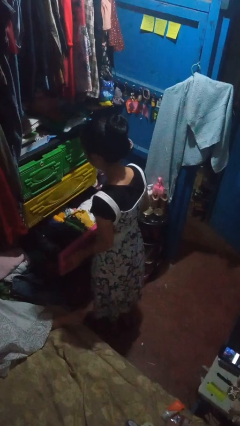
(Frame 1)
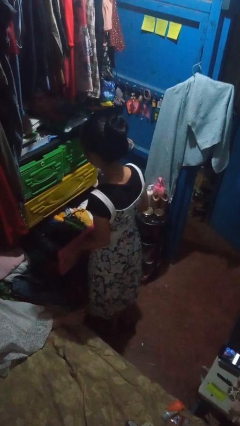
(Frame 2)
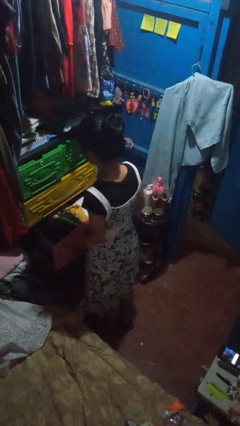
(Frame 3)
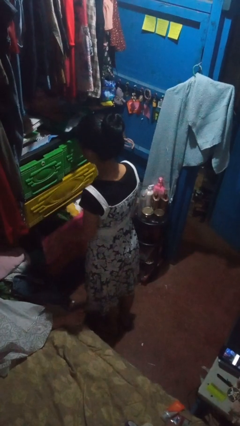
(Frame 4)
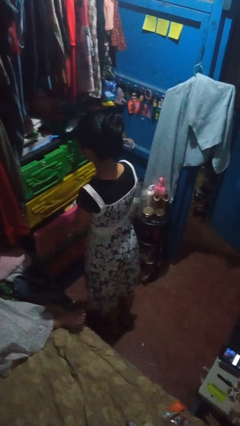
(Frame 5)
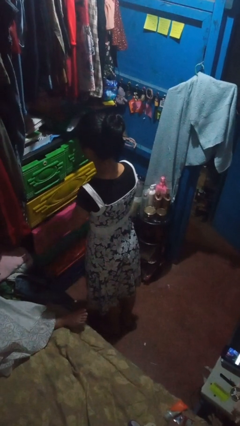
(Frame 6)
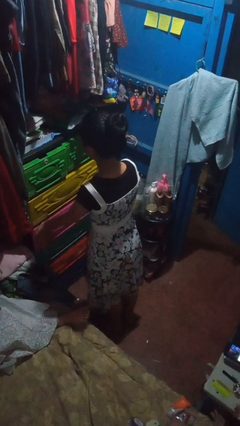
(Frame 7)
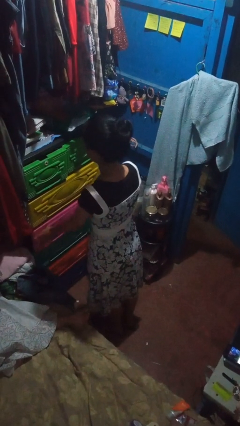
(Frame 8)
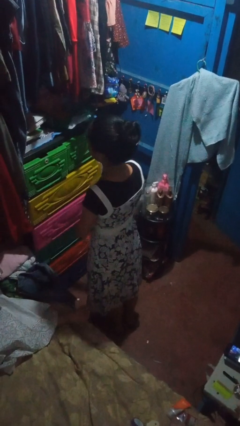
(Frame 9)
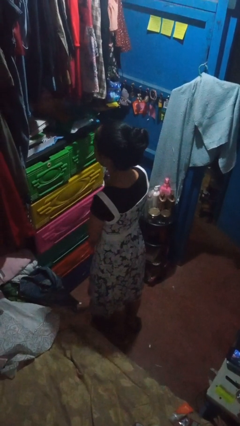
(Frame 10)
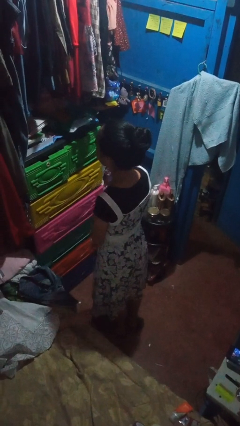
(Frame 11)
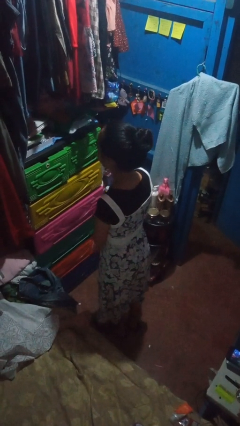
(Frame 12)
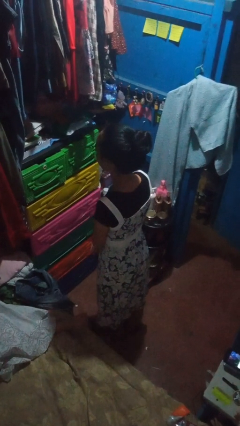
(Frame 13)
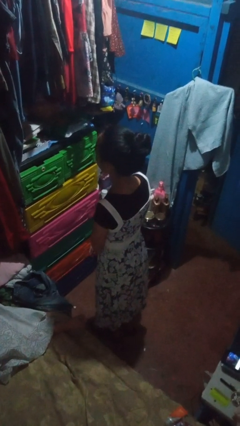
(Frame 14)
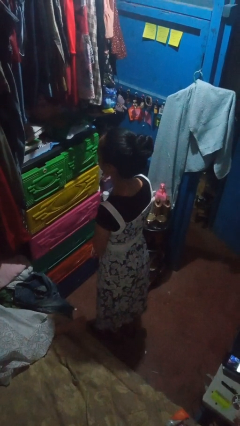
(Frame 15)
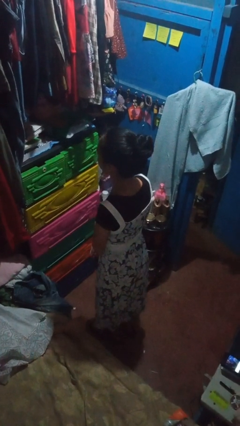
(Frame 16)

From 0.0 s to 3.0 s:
person closes dresser drawer

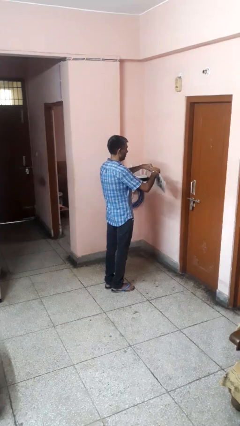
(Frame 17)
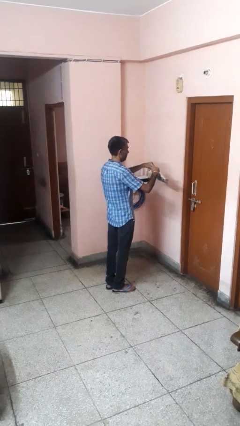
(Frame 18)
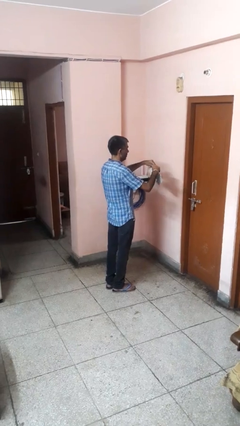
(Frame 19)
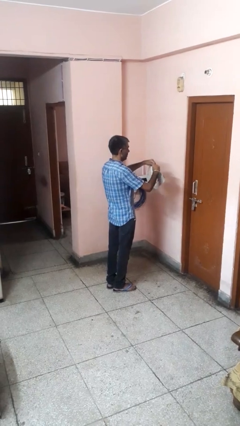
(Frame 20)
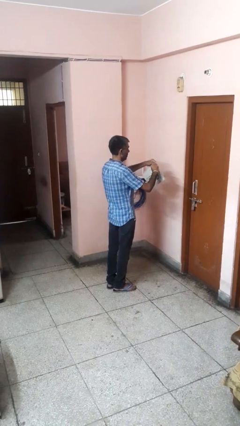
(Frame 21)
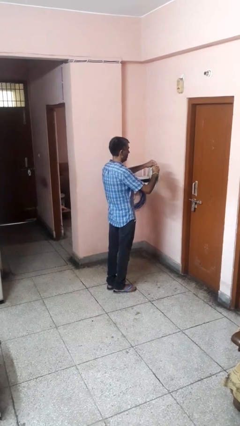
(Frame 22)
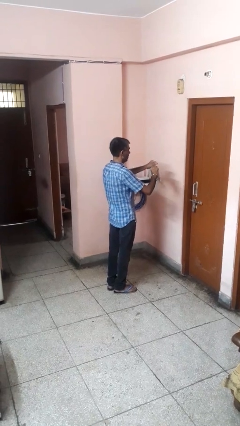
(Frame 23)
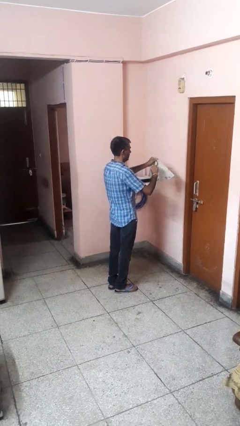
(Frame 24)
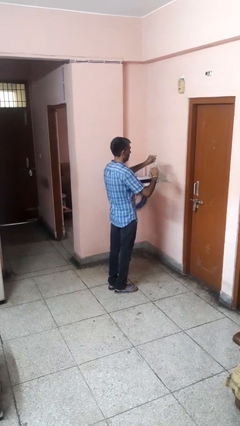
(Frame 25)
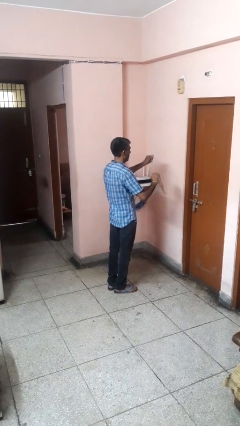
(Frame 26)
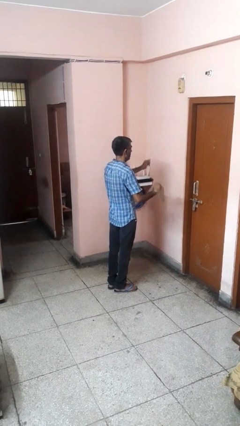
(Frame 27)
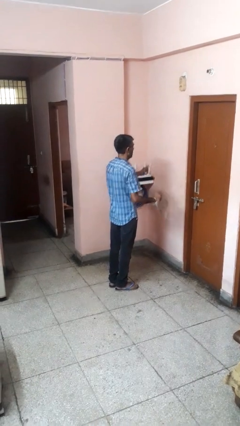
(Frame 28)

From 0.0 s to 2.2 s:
person tears paper

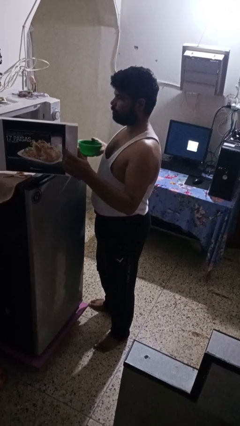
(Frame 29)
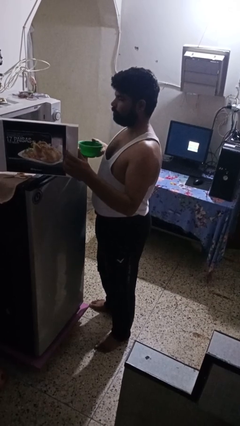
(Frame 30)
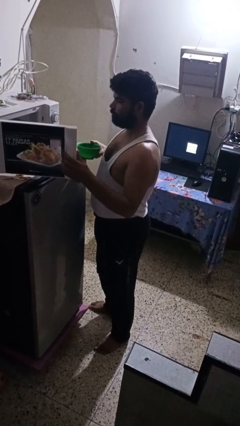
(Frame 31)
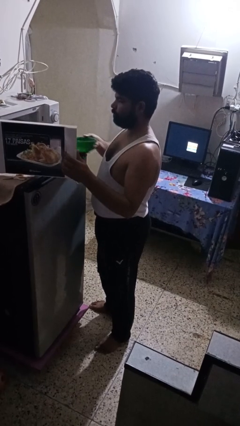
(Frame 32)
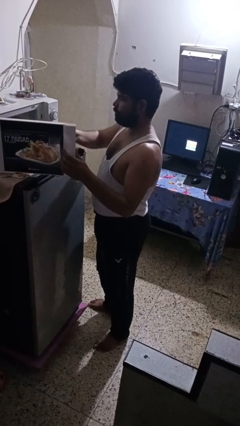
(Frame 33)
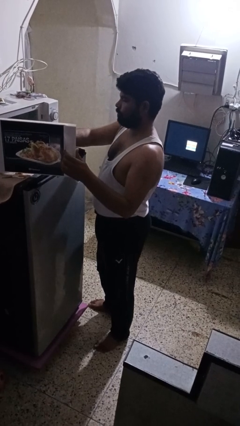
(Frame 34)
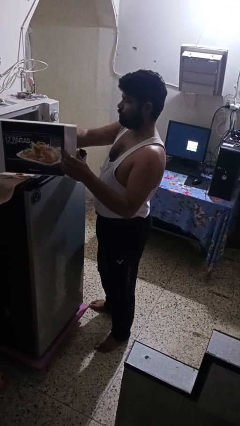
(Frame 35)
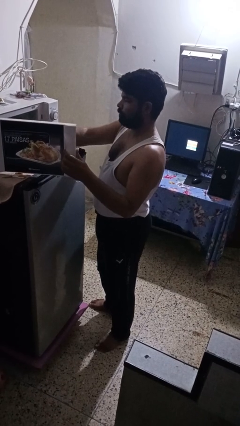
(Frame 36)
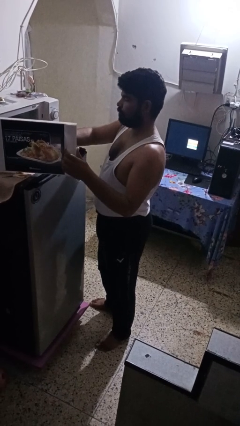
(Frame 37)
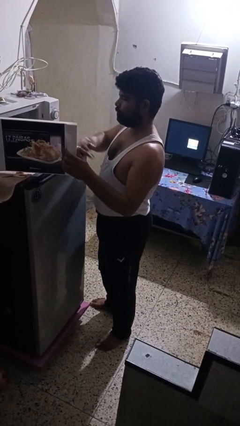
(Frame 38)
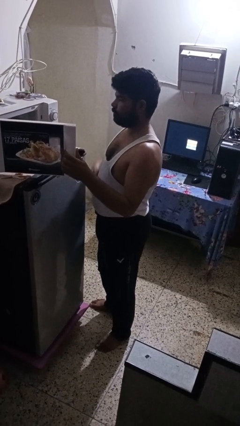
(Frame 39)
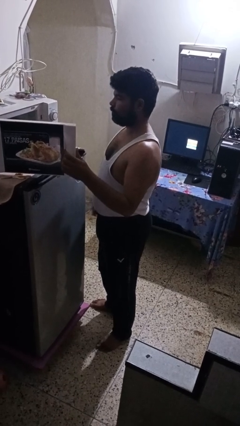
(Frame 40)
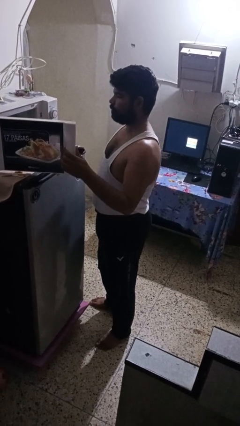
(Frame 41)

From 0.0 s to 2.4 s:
person puts object into microwave

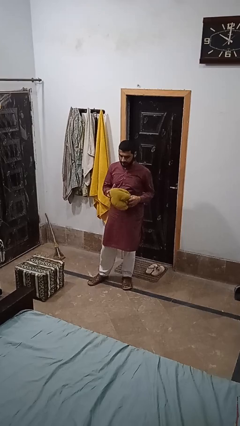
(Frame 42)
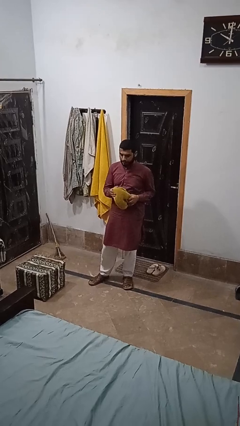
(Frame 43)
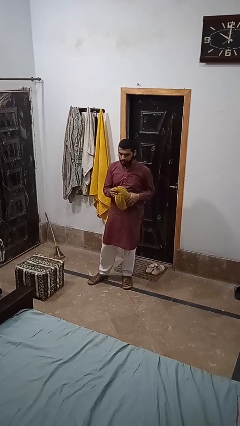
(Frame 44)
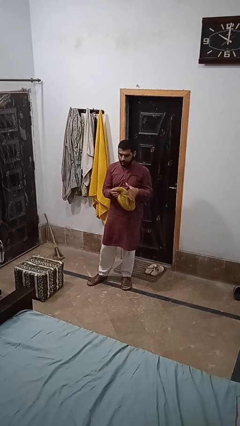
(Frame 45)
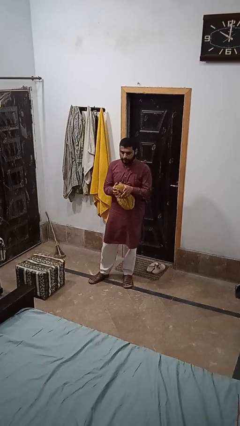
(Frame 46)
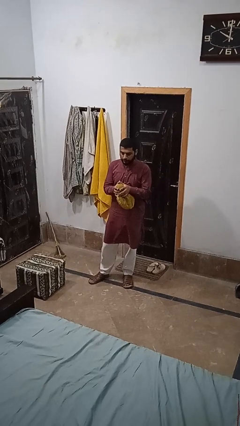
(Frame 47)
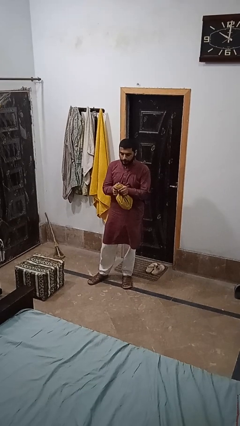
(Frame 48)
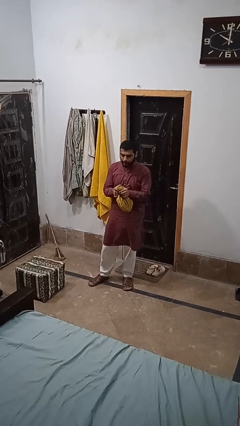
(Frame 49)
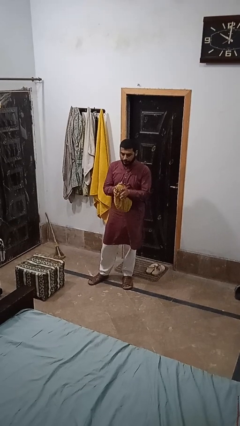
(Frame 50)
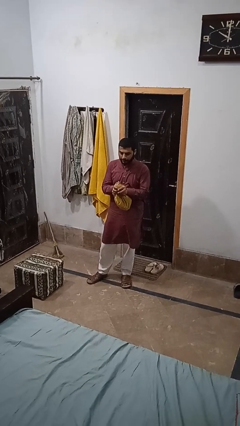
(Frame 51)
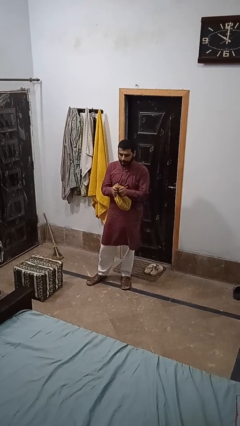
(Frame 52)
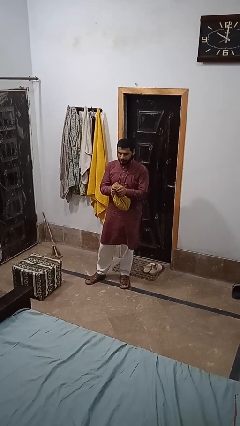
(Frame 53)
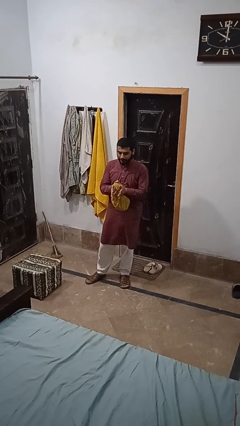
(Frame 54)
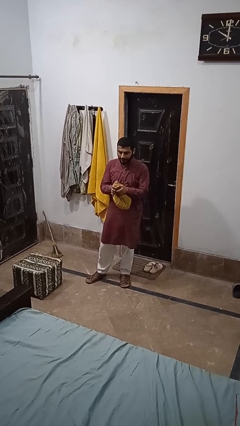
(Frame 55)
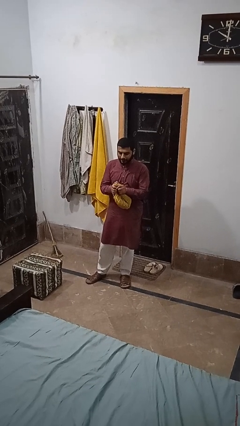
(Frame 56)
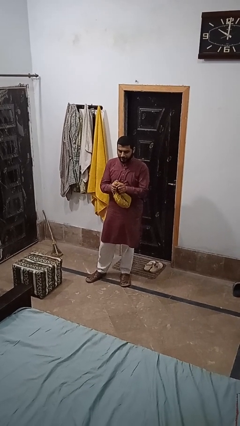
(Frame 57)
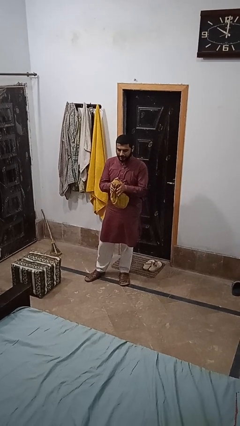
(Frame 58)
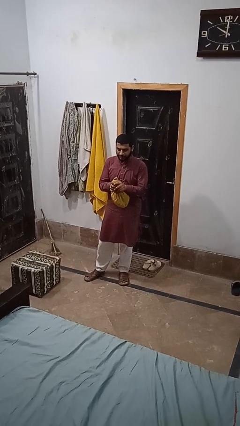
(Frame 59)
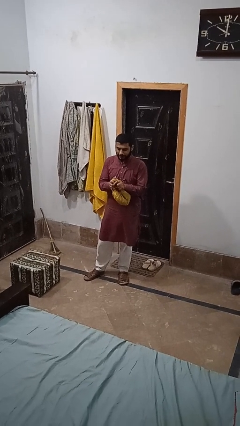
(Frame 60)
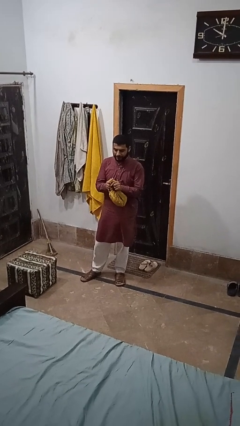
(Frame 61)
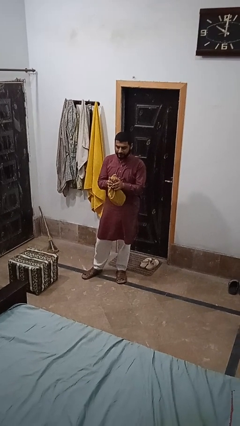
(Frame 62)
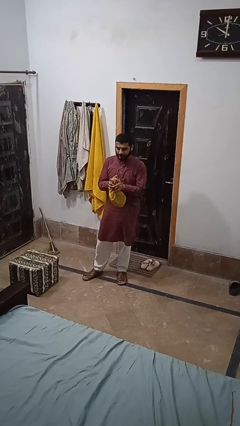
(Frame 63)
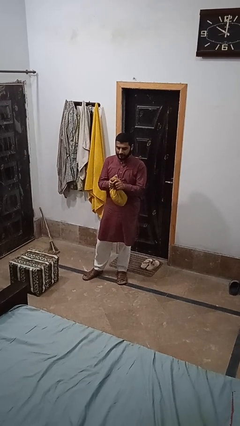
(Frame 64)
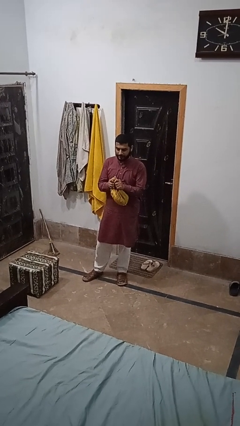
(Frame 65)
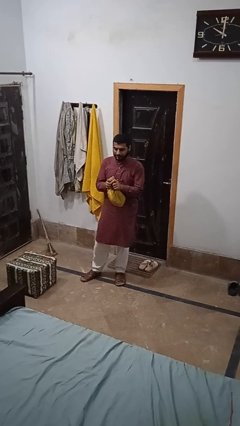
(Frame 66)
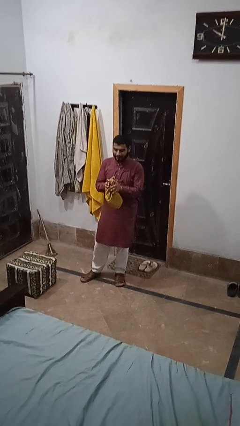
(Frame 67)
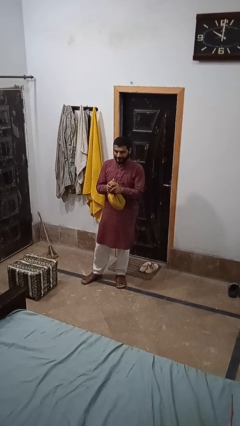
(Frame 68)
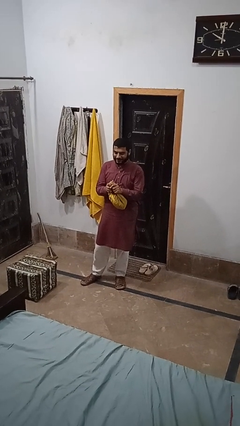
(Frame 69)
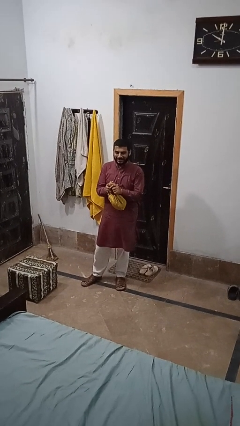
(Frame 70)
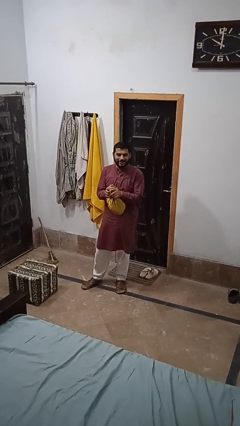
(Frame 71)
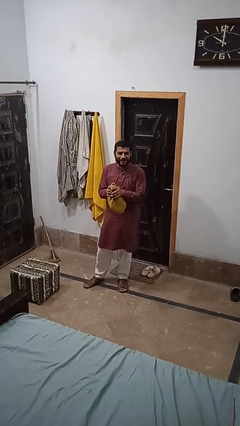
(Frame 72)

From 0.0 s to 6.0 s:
person squeezes object

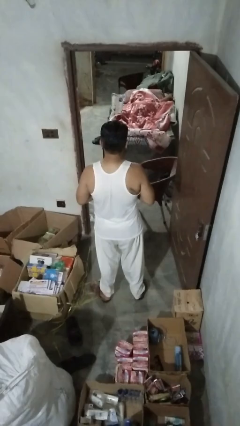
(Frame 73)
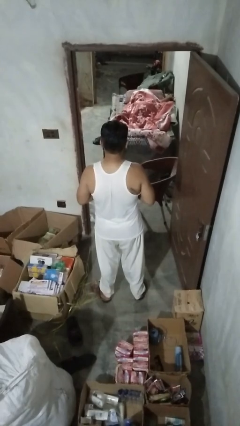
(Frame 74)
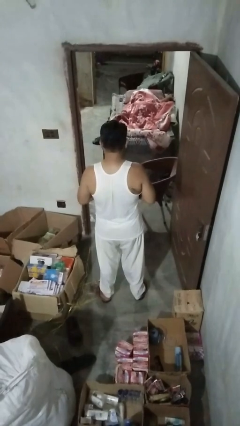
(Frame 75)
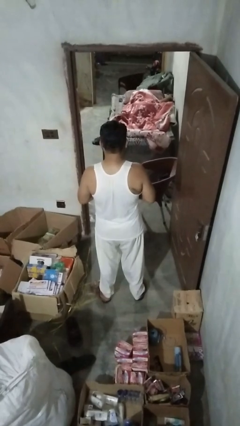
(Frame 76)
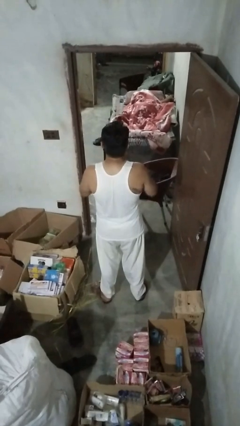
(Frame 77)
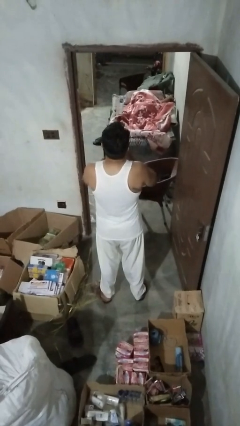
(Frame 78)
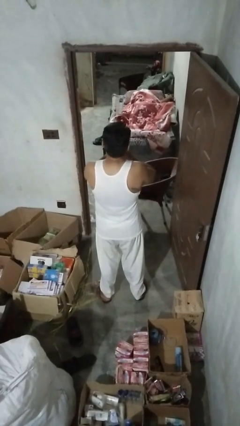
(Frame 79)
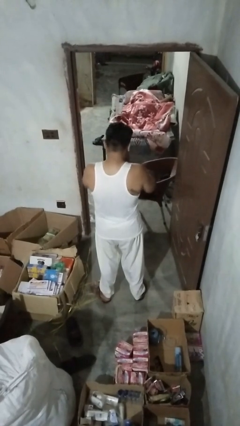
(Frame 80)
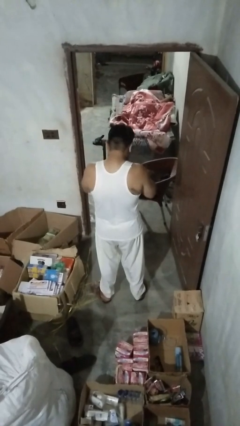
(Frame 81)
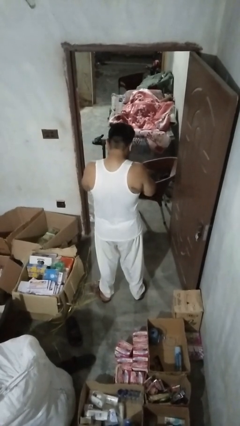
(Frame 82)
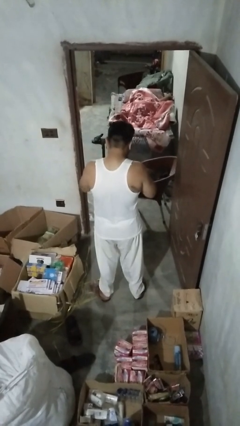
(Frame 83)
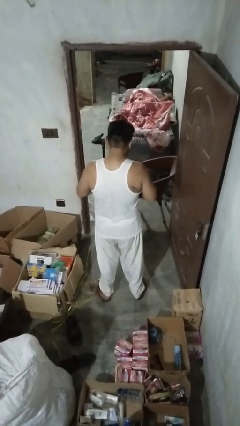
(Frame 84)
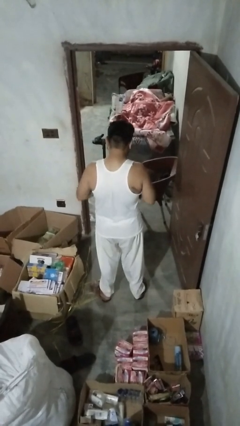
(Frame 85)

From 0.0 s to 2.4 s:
person sneezes into hand

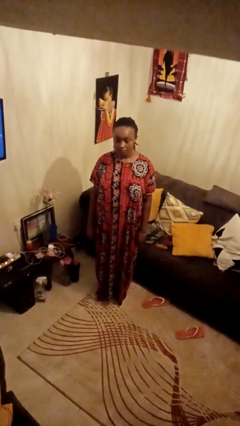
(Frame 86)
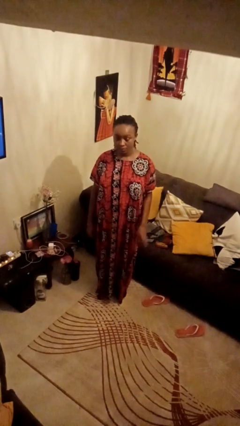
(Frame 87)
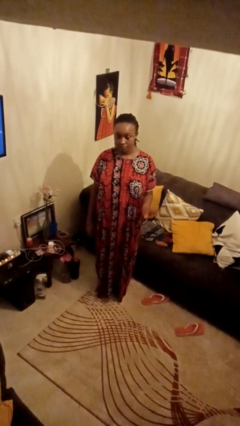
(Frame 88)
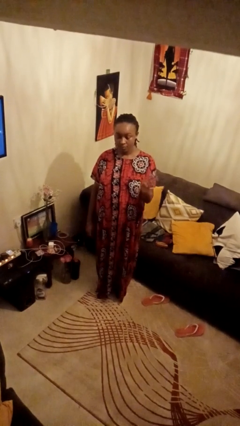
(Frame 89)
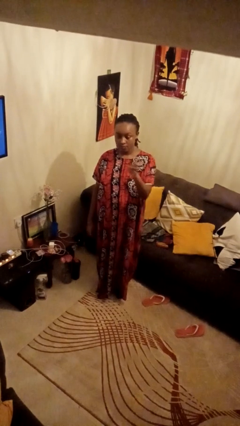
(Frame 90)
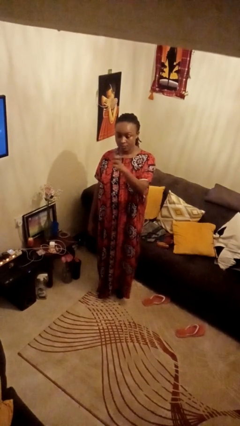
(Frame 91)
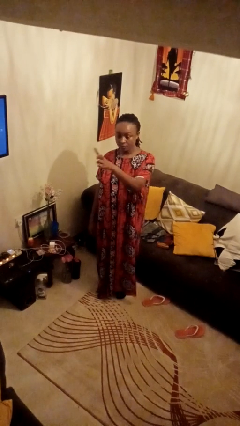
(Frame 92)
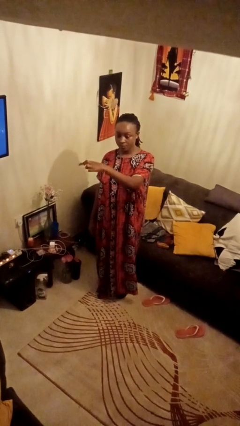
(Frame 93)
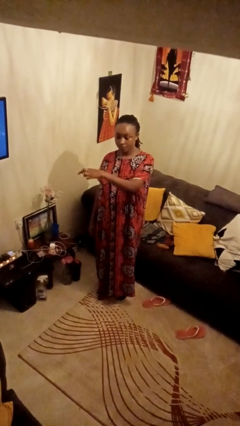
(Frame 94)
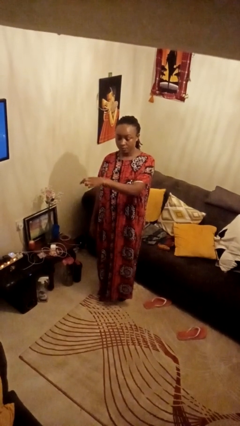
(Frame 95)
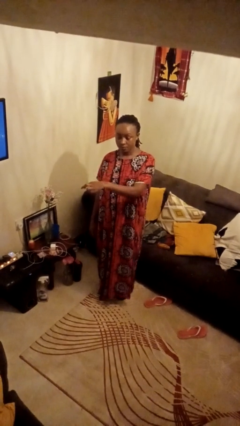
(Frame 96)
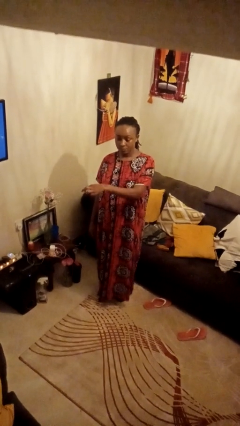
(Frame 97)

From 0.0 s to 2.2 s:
person gestures swipe left
